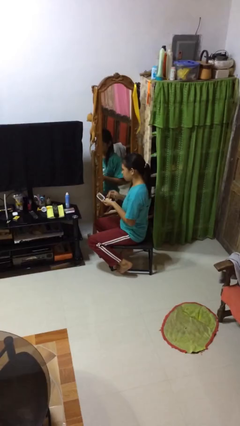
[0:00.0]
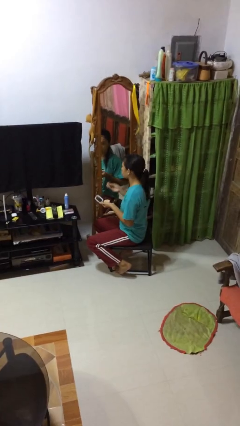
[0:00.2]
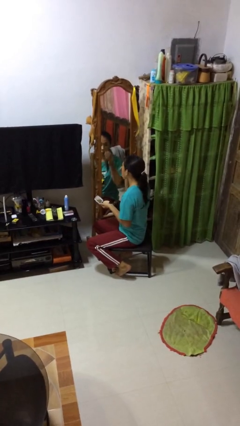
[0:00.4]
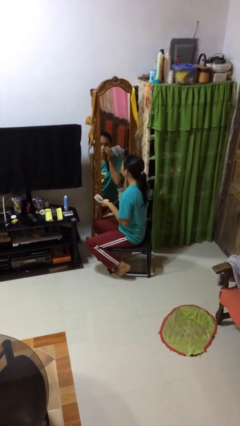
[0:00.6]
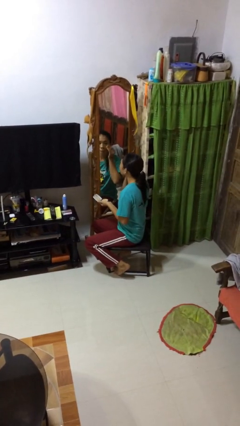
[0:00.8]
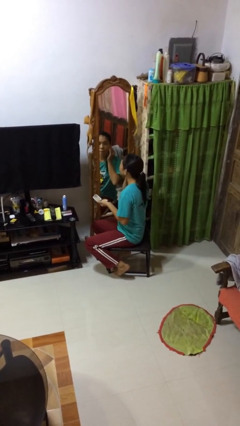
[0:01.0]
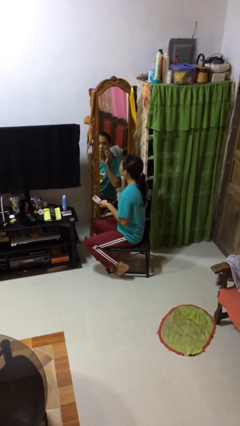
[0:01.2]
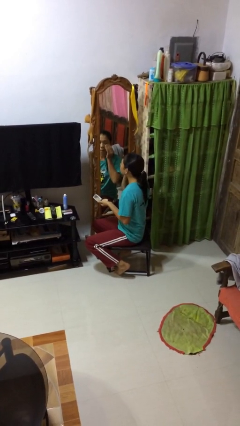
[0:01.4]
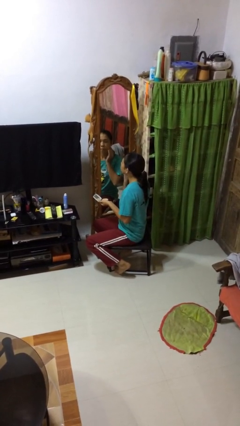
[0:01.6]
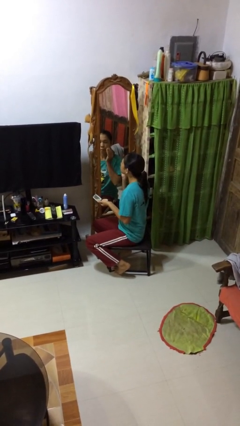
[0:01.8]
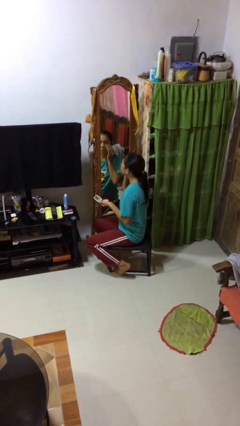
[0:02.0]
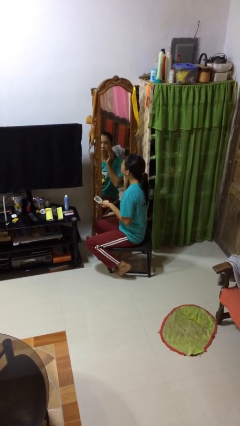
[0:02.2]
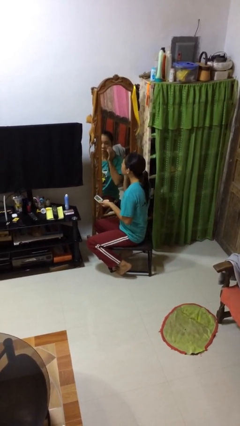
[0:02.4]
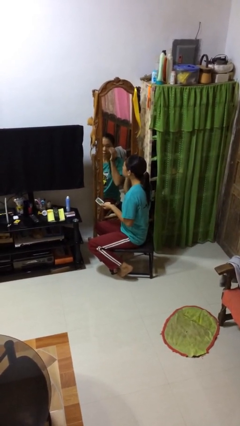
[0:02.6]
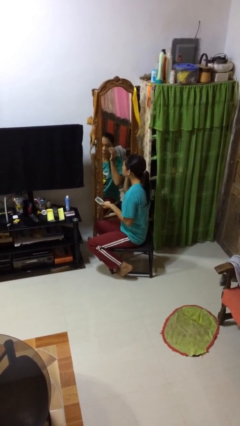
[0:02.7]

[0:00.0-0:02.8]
person applies foundation makeup

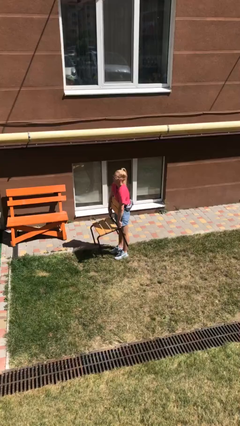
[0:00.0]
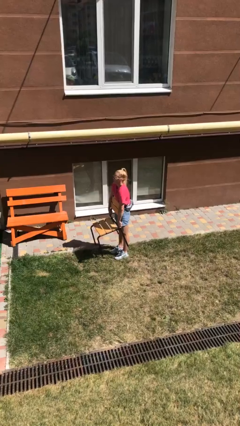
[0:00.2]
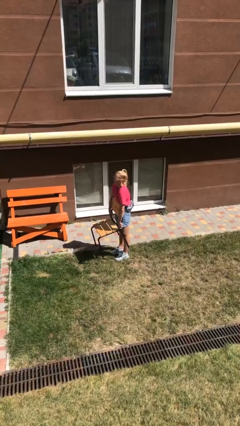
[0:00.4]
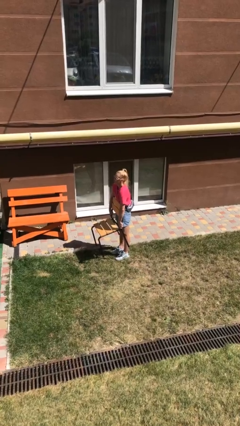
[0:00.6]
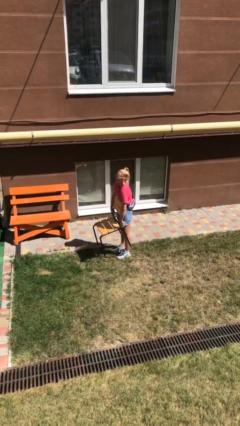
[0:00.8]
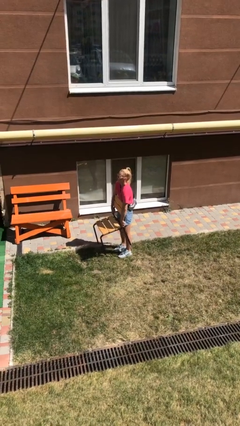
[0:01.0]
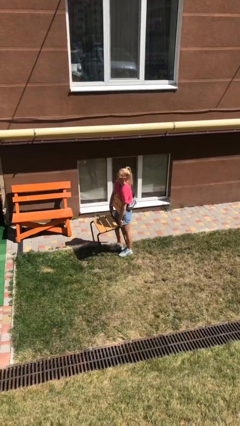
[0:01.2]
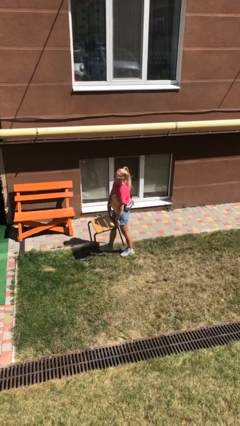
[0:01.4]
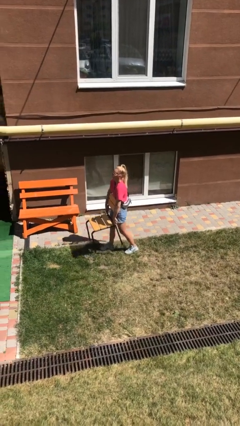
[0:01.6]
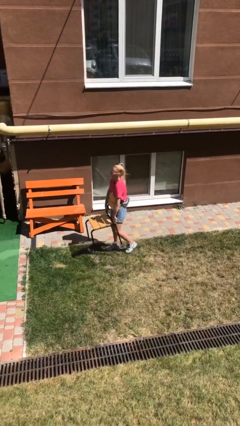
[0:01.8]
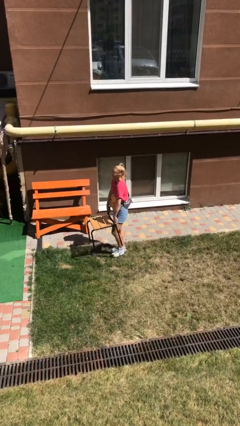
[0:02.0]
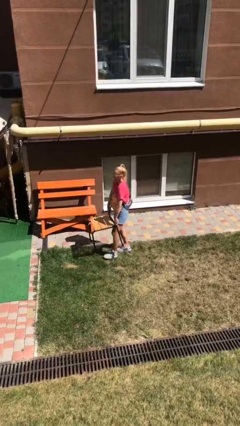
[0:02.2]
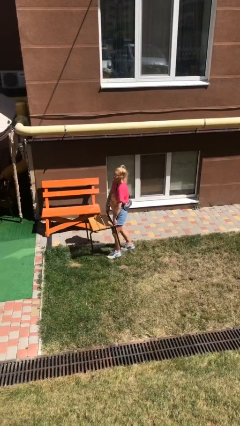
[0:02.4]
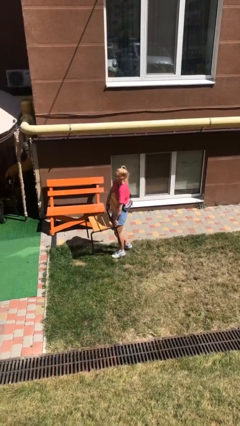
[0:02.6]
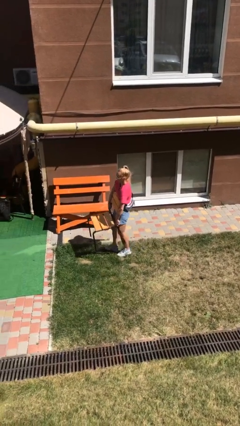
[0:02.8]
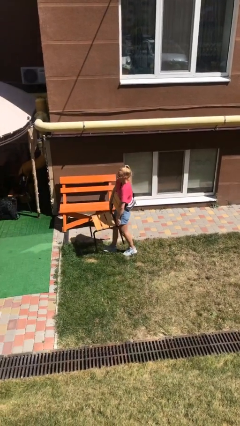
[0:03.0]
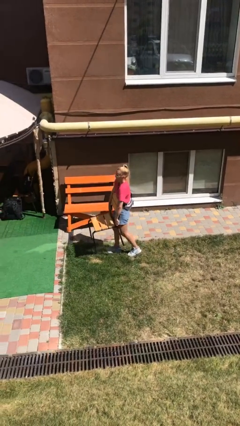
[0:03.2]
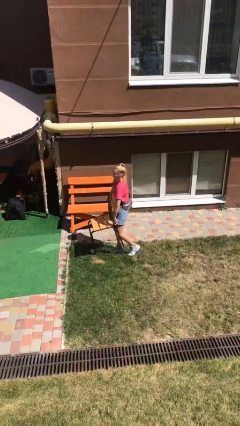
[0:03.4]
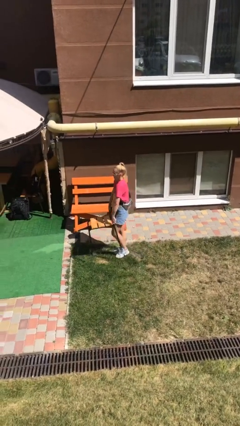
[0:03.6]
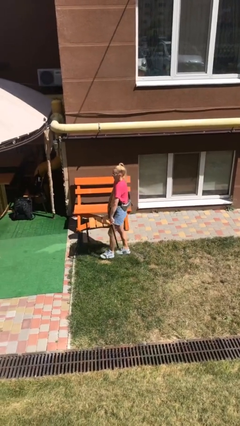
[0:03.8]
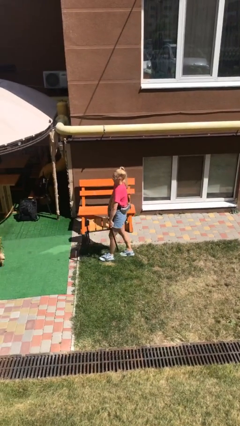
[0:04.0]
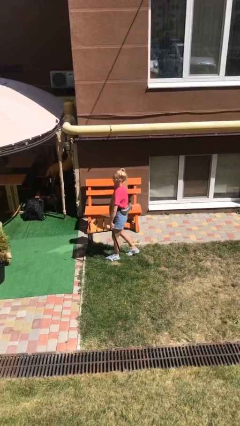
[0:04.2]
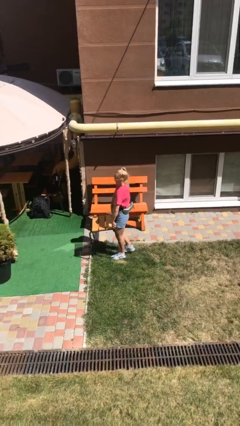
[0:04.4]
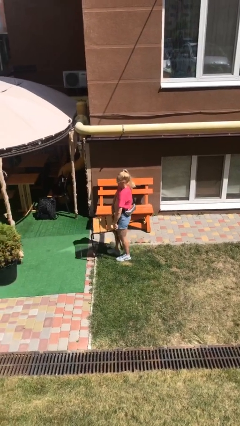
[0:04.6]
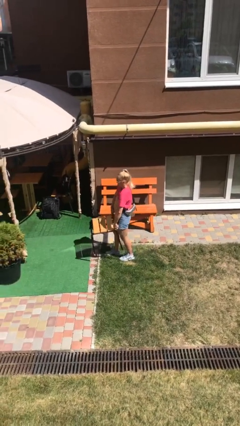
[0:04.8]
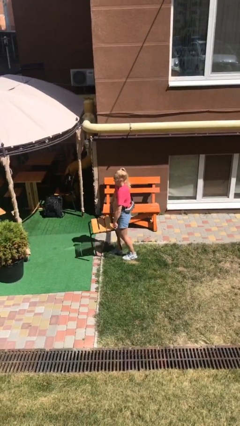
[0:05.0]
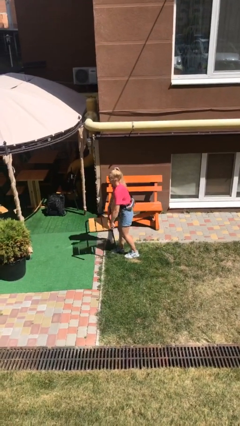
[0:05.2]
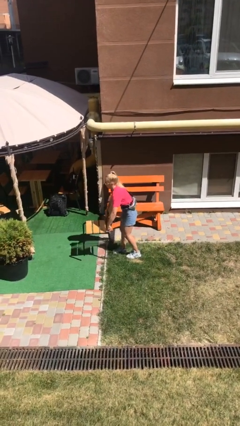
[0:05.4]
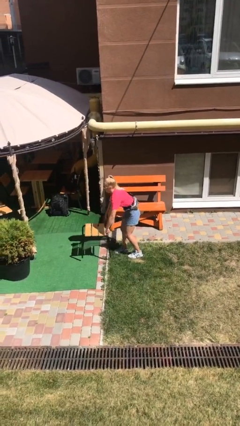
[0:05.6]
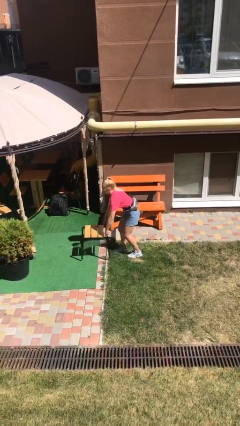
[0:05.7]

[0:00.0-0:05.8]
person carries heavy object

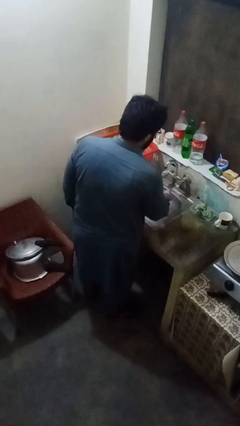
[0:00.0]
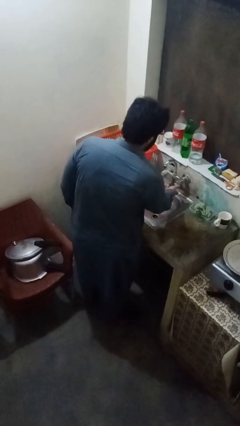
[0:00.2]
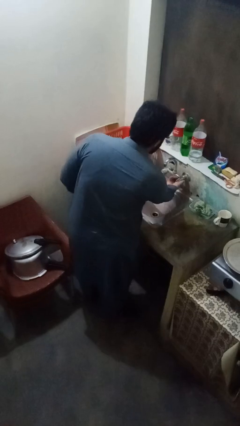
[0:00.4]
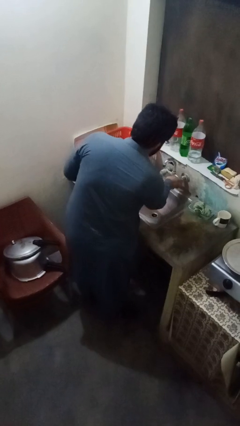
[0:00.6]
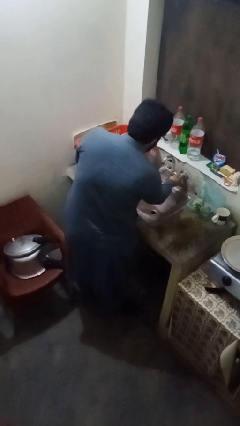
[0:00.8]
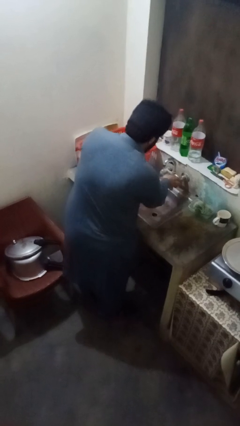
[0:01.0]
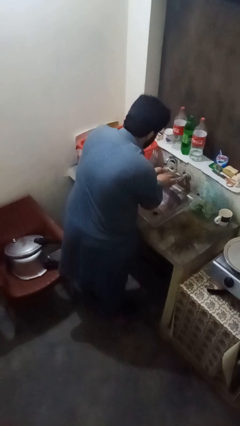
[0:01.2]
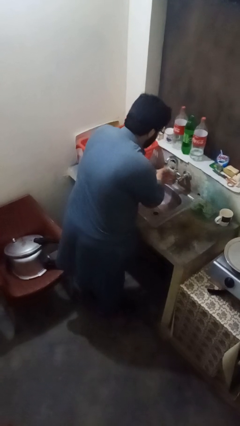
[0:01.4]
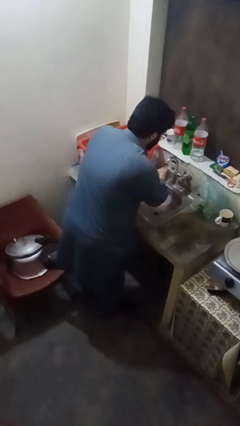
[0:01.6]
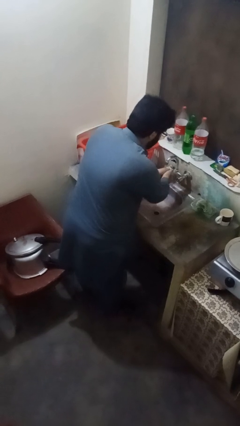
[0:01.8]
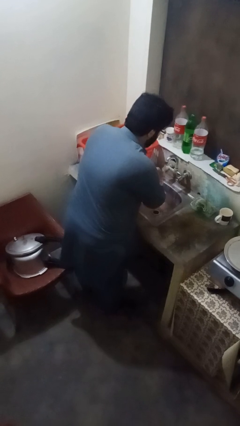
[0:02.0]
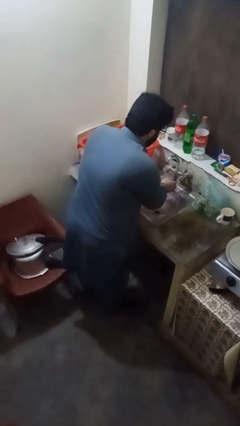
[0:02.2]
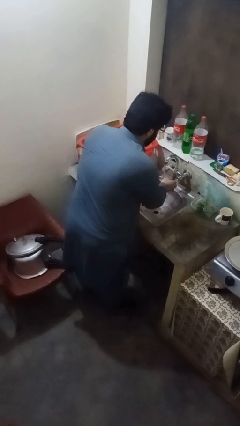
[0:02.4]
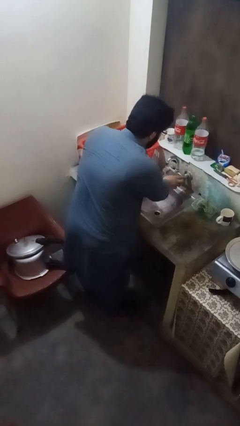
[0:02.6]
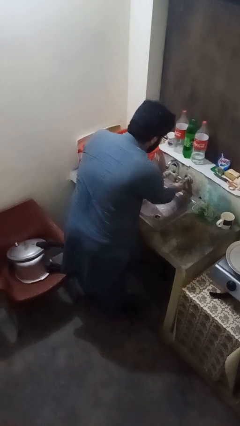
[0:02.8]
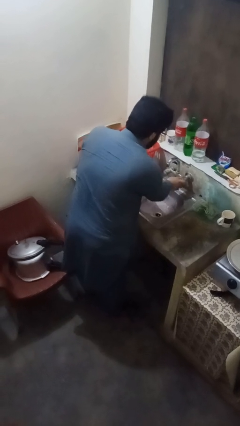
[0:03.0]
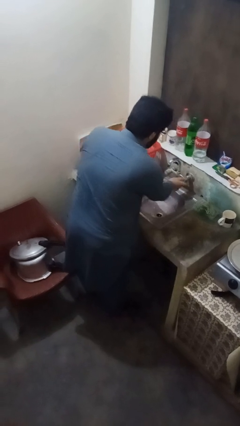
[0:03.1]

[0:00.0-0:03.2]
person washes hands

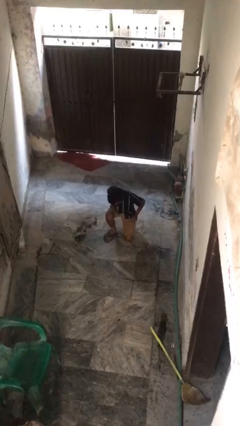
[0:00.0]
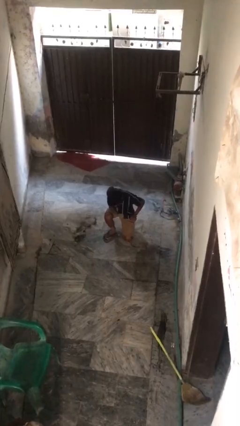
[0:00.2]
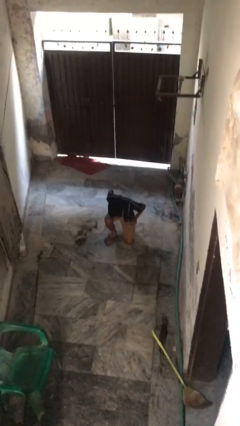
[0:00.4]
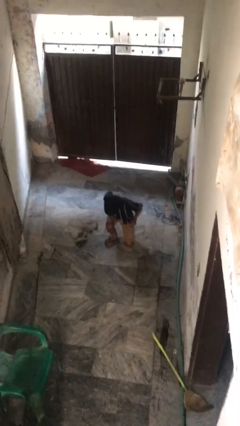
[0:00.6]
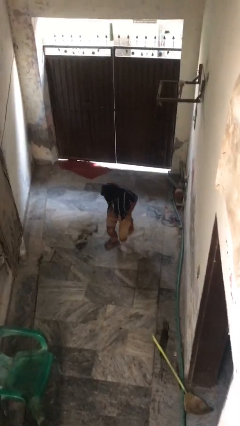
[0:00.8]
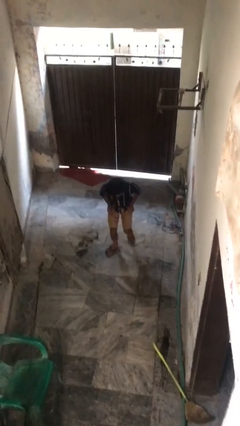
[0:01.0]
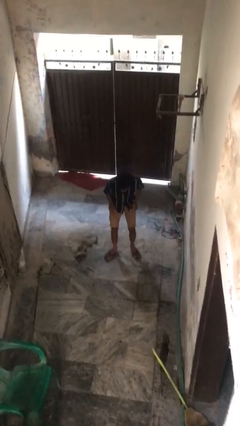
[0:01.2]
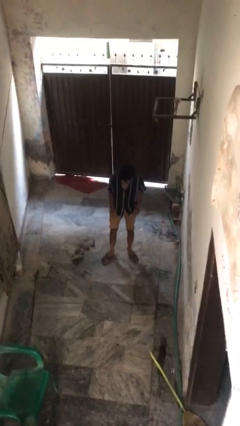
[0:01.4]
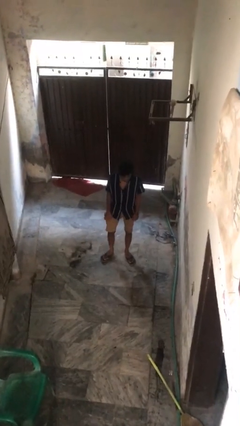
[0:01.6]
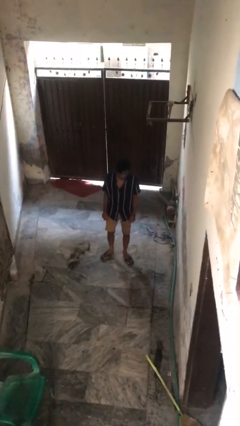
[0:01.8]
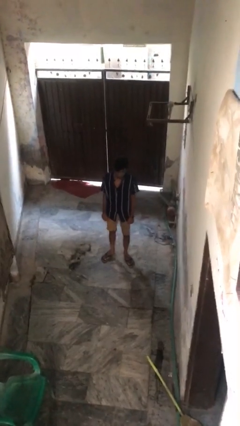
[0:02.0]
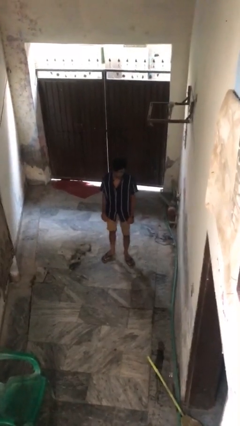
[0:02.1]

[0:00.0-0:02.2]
person stands up from floor

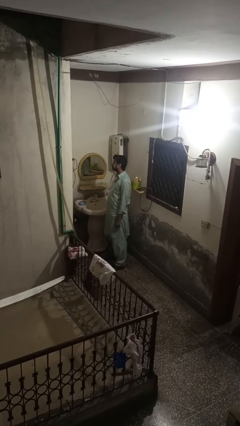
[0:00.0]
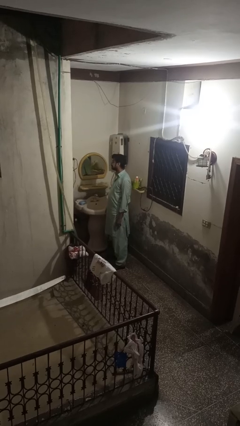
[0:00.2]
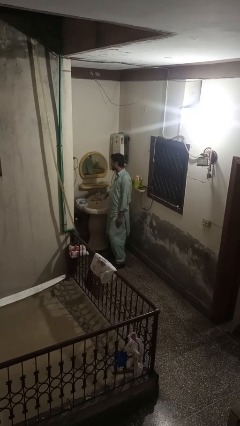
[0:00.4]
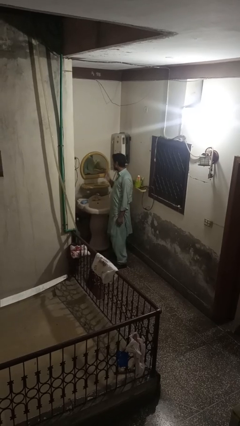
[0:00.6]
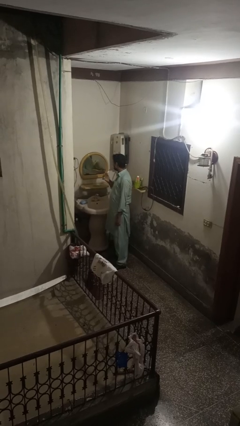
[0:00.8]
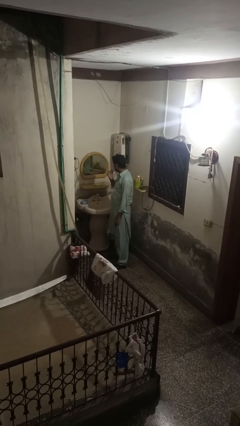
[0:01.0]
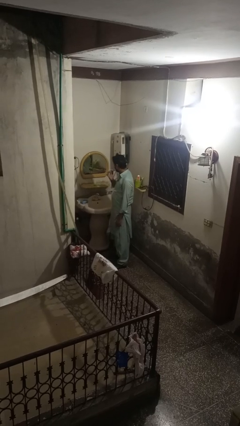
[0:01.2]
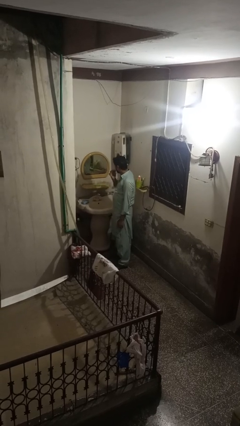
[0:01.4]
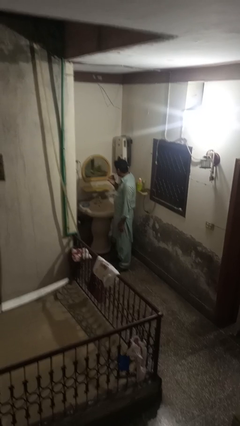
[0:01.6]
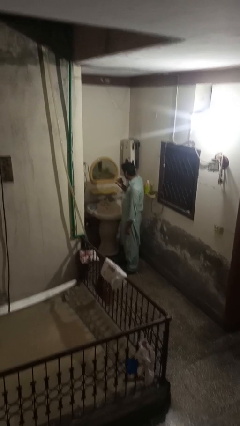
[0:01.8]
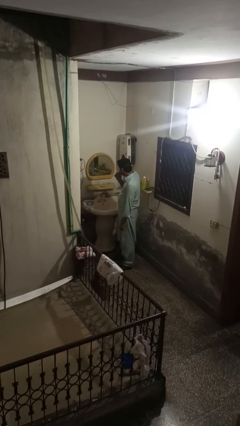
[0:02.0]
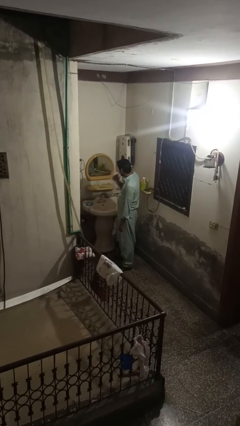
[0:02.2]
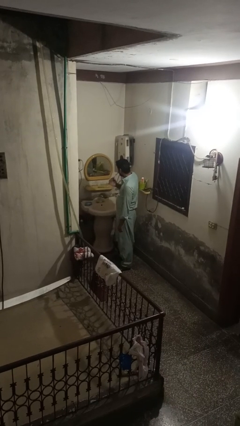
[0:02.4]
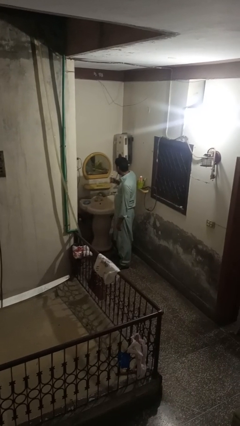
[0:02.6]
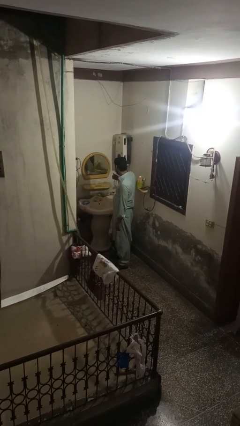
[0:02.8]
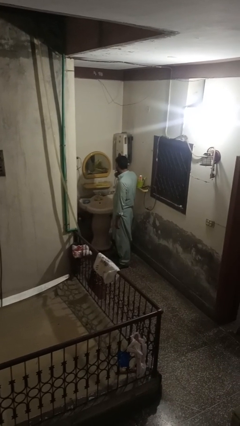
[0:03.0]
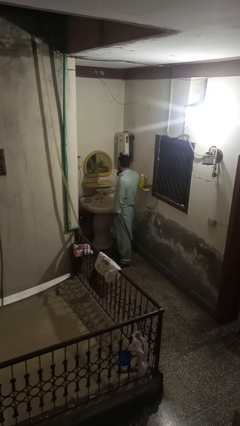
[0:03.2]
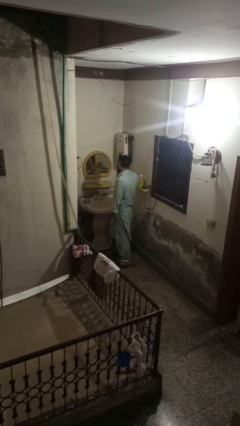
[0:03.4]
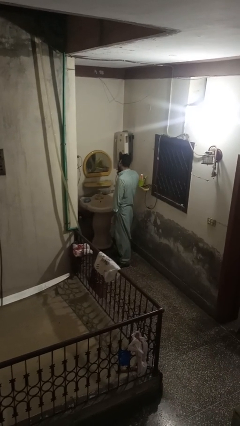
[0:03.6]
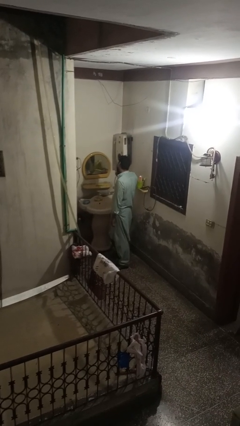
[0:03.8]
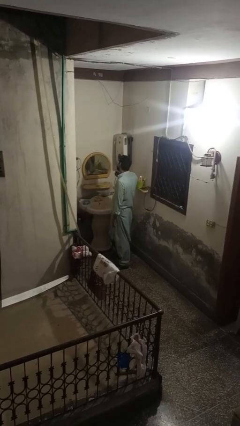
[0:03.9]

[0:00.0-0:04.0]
person brushes teeth
